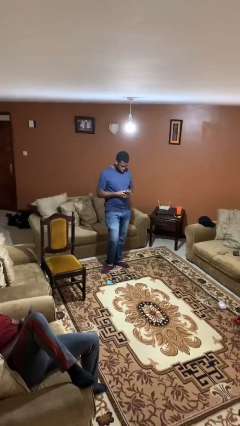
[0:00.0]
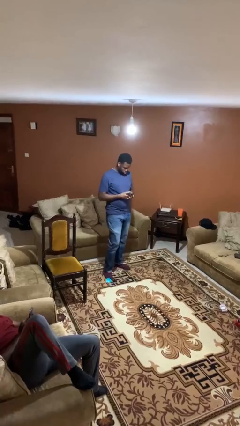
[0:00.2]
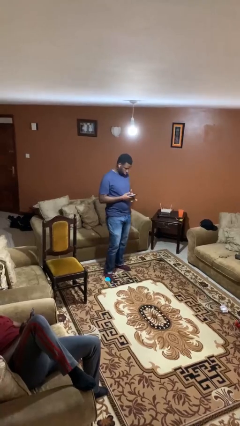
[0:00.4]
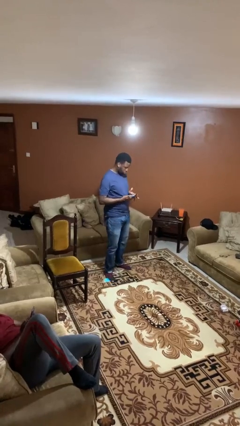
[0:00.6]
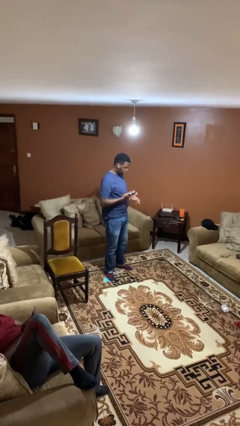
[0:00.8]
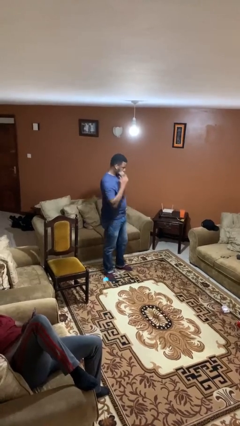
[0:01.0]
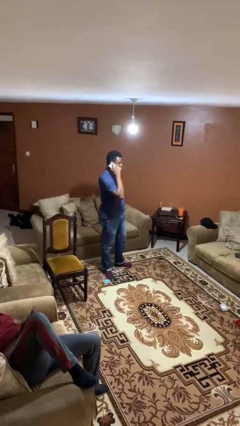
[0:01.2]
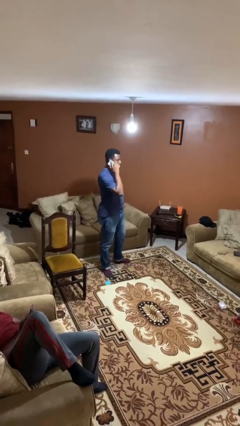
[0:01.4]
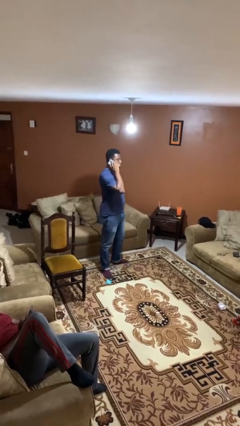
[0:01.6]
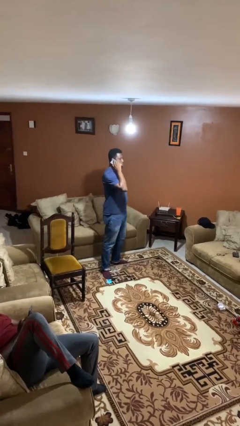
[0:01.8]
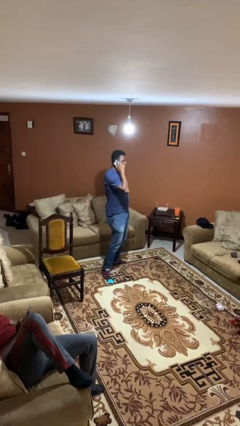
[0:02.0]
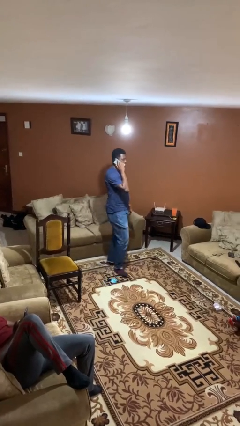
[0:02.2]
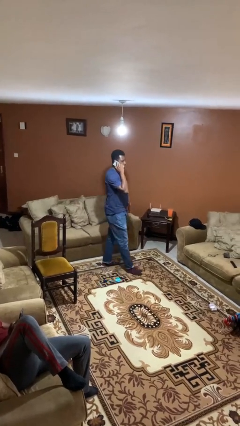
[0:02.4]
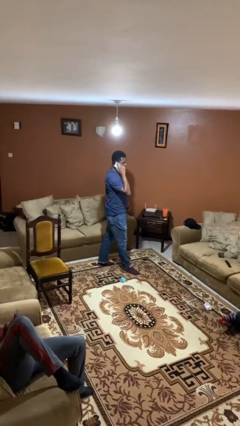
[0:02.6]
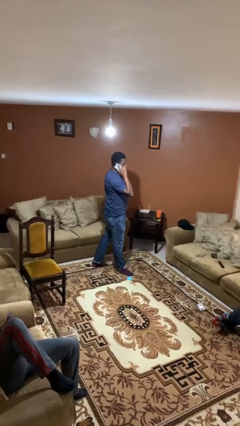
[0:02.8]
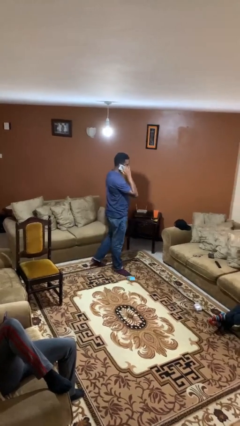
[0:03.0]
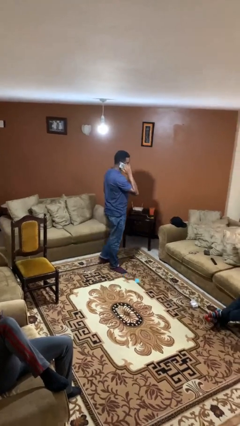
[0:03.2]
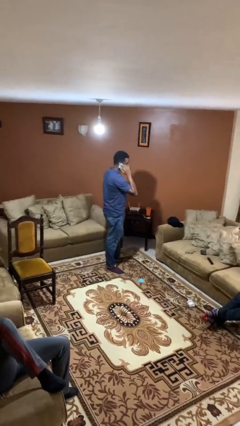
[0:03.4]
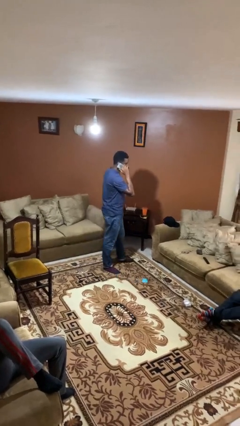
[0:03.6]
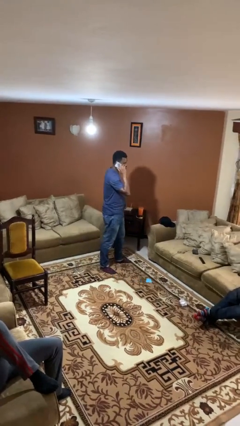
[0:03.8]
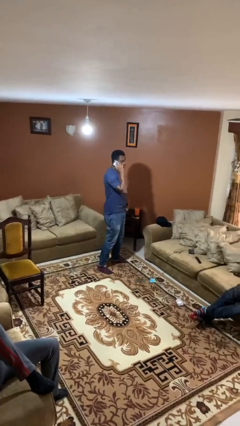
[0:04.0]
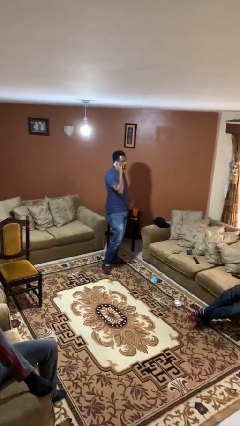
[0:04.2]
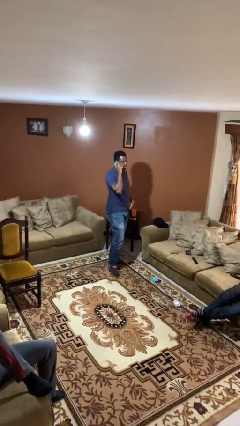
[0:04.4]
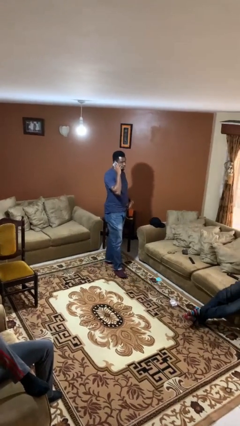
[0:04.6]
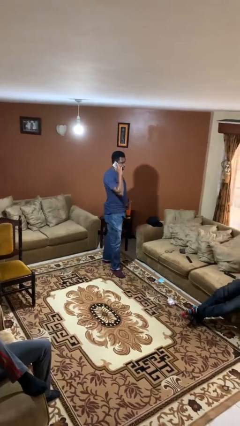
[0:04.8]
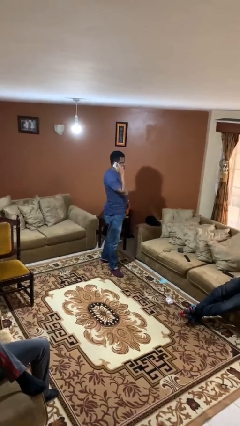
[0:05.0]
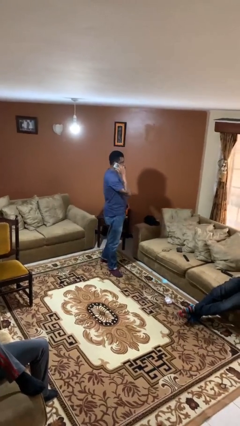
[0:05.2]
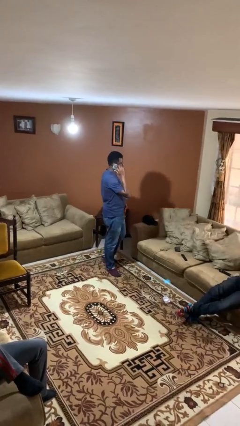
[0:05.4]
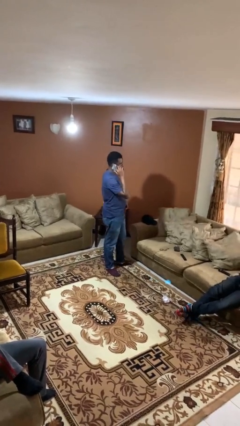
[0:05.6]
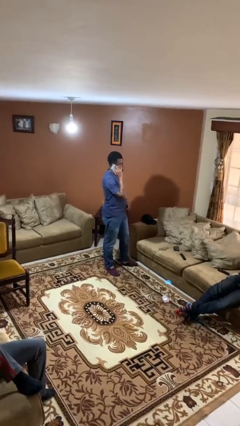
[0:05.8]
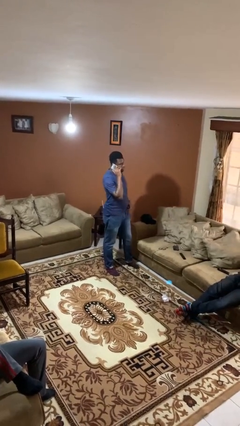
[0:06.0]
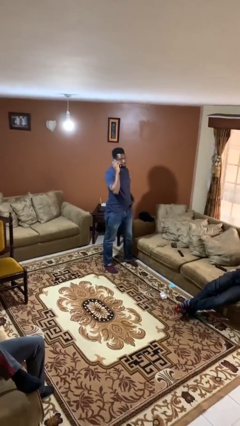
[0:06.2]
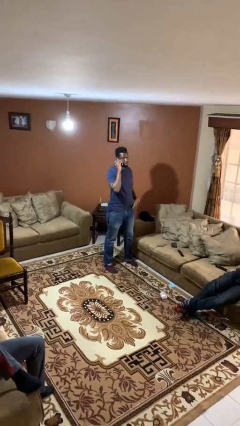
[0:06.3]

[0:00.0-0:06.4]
person talks on phone

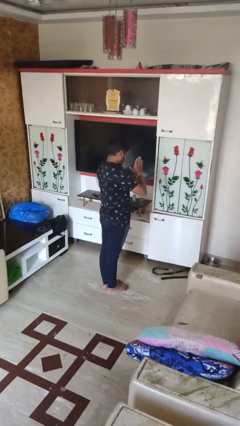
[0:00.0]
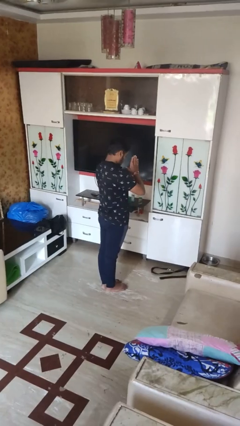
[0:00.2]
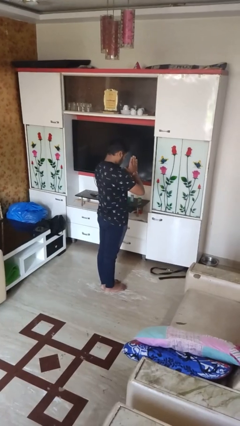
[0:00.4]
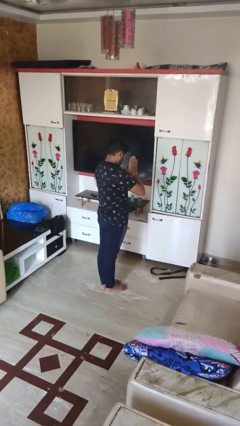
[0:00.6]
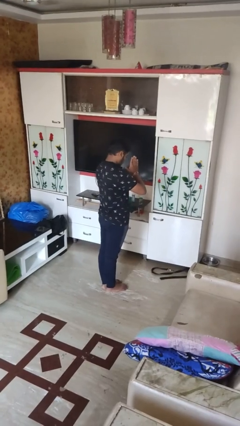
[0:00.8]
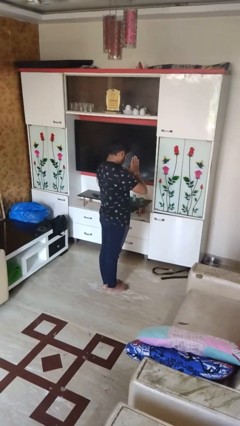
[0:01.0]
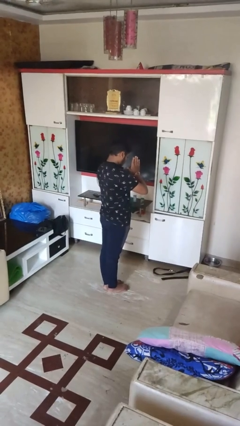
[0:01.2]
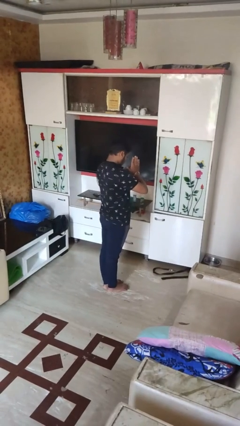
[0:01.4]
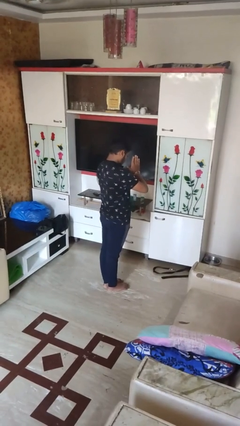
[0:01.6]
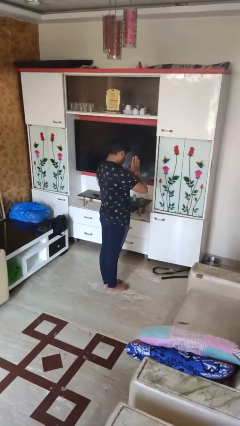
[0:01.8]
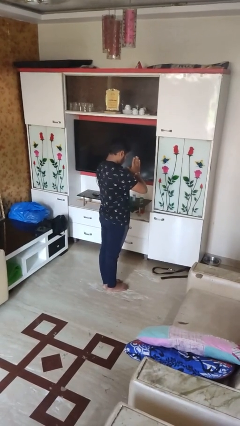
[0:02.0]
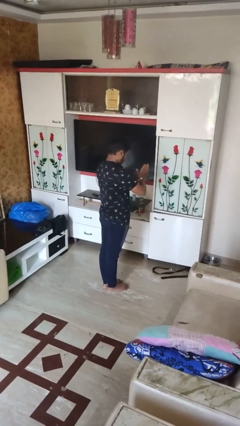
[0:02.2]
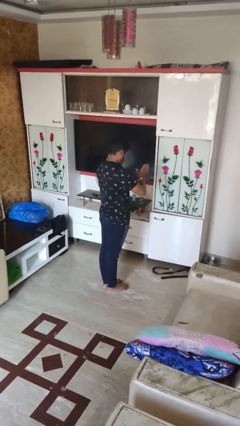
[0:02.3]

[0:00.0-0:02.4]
person prays

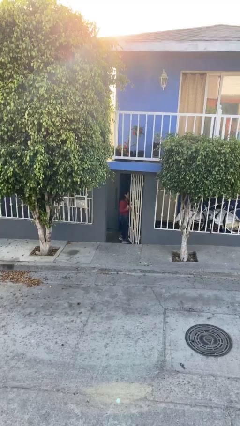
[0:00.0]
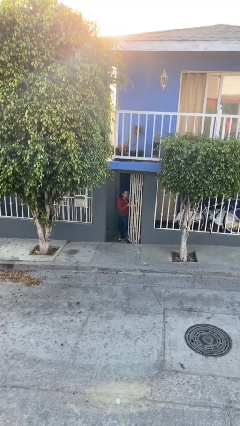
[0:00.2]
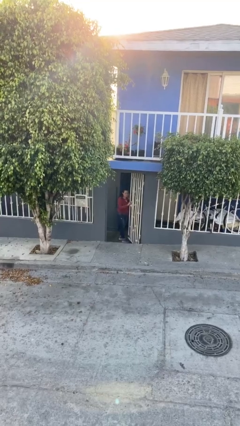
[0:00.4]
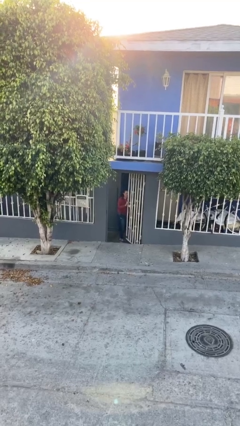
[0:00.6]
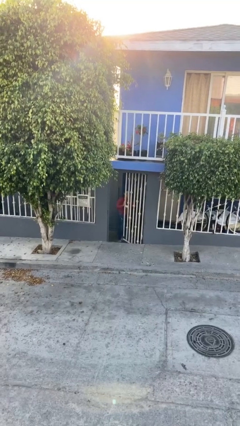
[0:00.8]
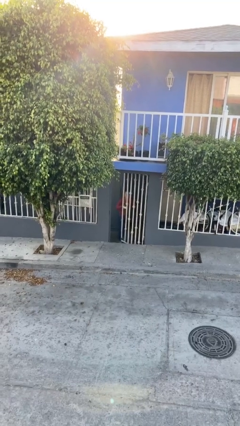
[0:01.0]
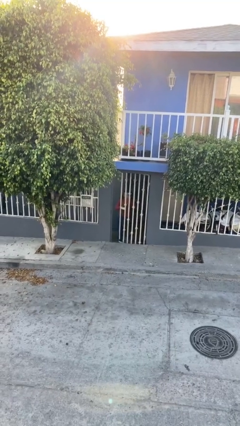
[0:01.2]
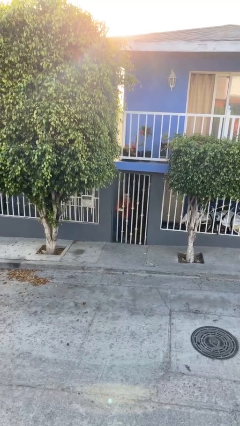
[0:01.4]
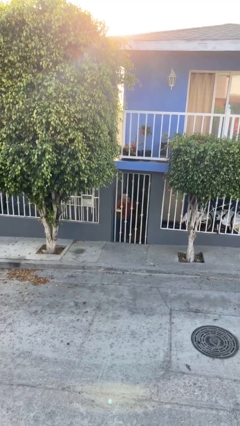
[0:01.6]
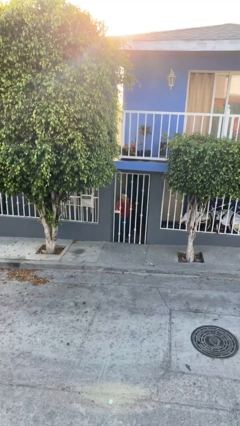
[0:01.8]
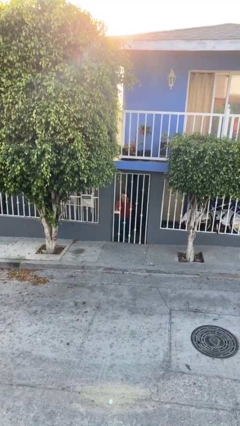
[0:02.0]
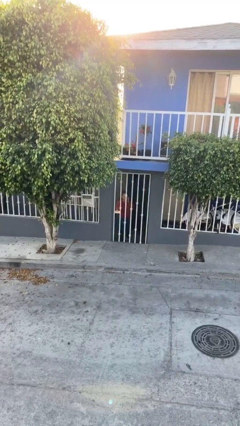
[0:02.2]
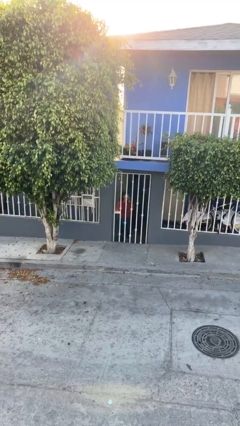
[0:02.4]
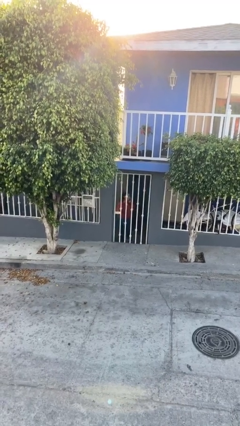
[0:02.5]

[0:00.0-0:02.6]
person closes facility door

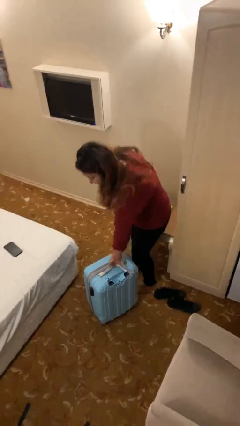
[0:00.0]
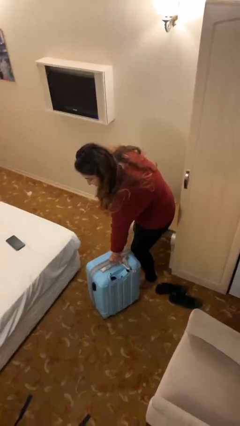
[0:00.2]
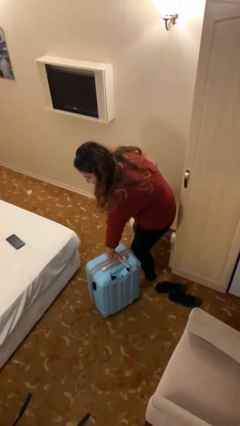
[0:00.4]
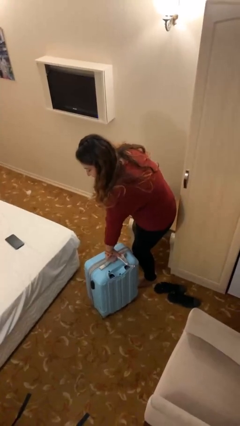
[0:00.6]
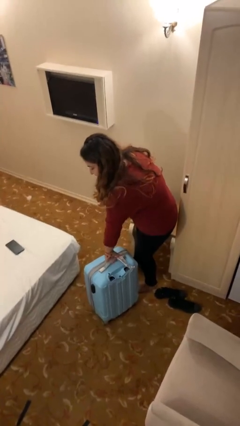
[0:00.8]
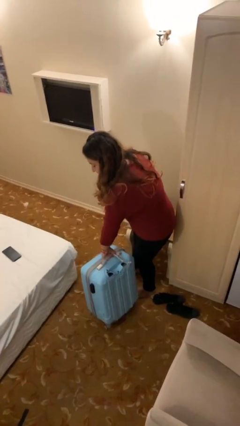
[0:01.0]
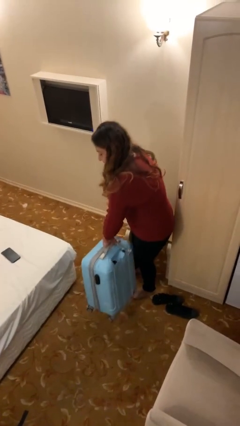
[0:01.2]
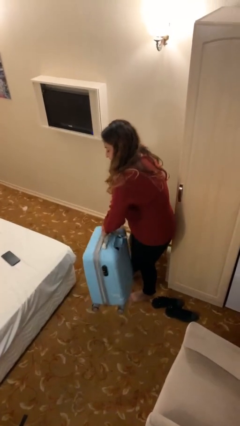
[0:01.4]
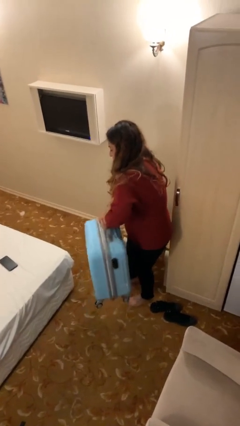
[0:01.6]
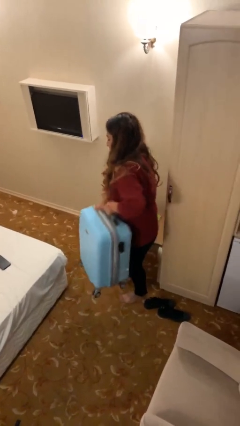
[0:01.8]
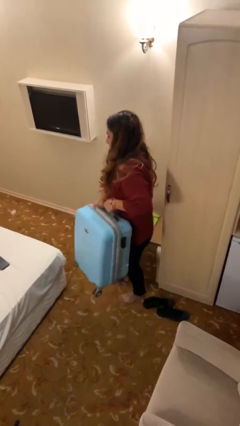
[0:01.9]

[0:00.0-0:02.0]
person picks up object from floor

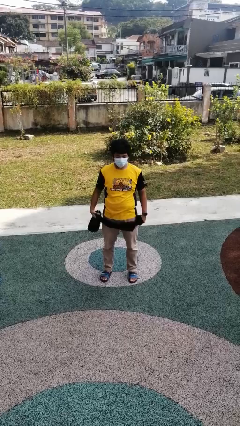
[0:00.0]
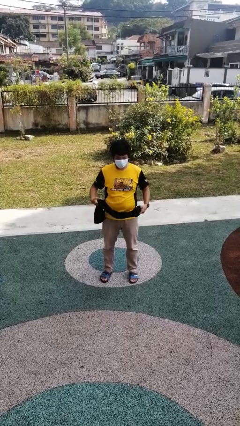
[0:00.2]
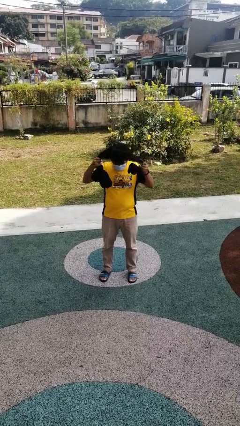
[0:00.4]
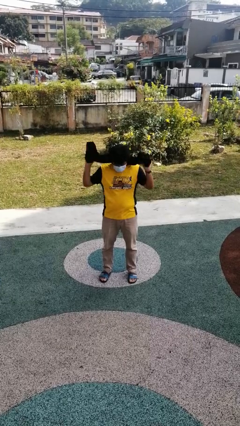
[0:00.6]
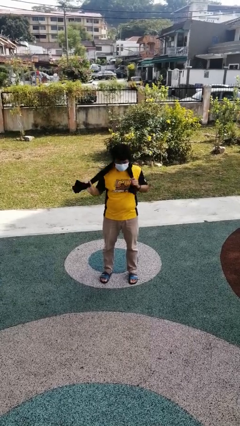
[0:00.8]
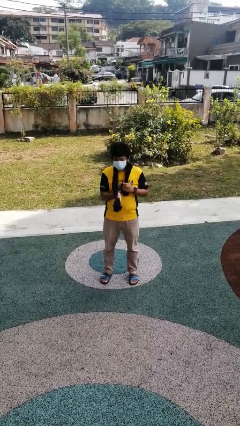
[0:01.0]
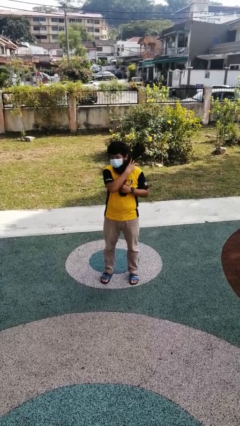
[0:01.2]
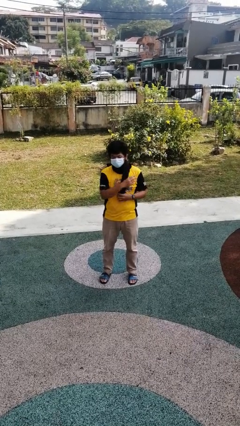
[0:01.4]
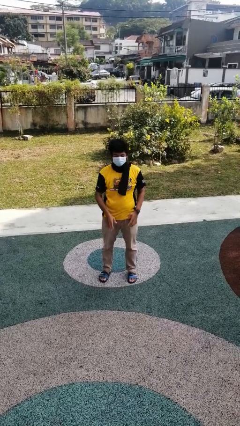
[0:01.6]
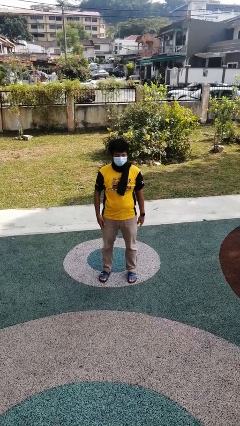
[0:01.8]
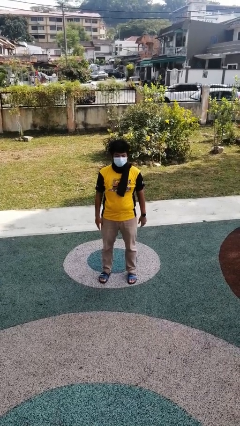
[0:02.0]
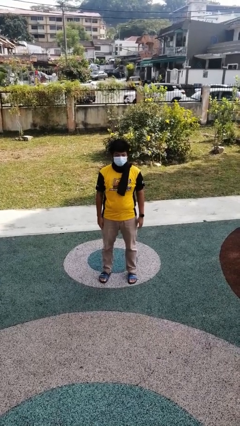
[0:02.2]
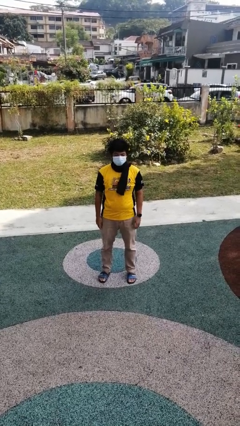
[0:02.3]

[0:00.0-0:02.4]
person puts on scarf

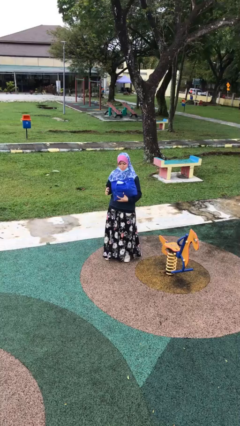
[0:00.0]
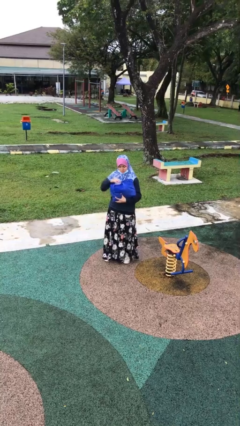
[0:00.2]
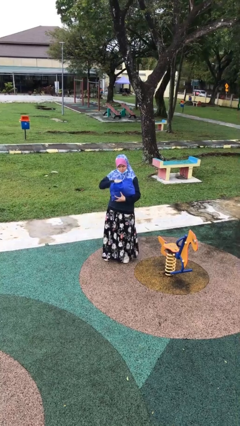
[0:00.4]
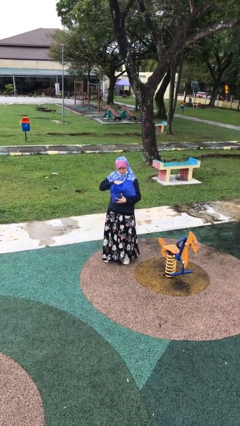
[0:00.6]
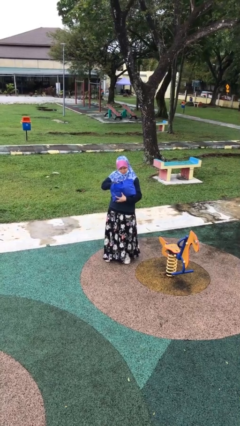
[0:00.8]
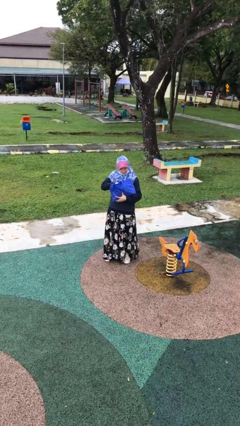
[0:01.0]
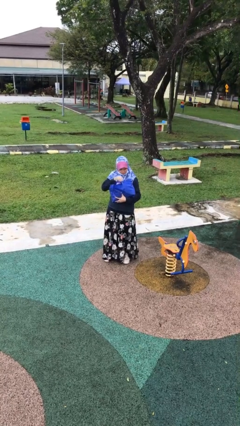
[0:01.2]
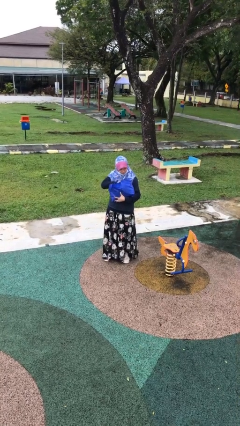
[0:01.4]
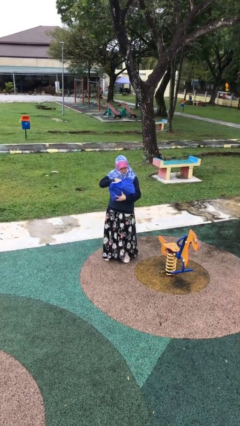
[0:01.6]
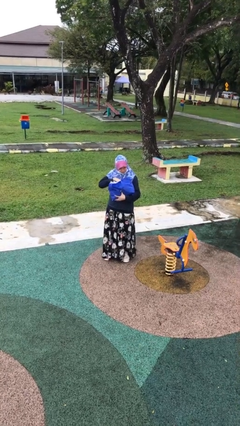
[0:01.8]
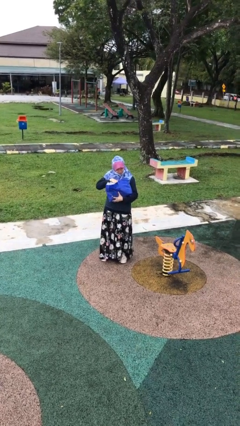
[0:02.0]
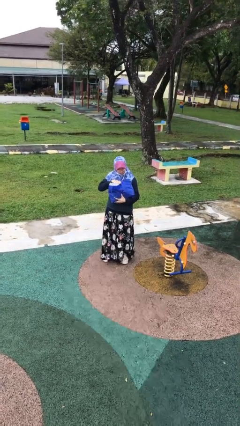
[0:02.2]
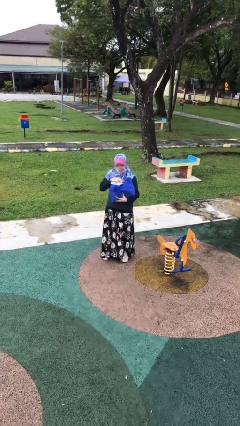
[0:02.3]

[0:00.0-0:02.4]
person searches in bag
